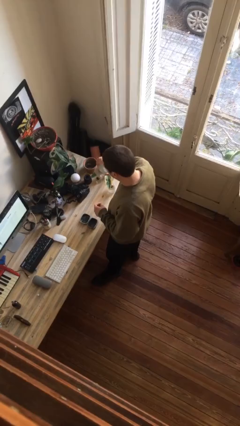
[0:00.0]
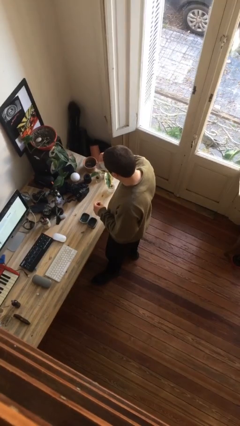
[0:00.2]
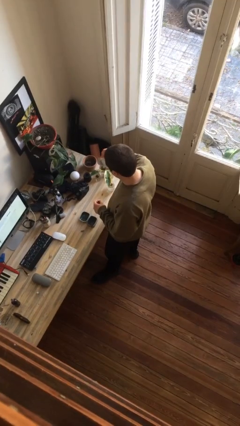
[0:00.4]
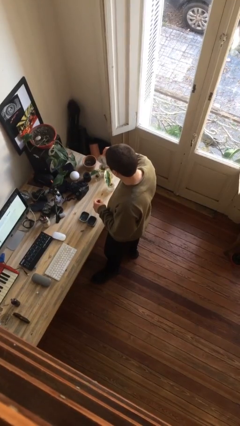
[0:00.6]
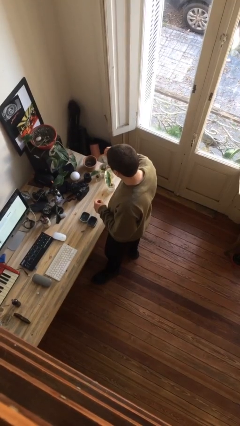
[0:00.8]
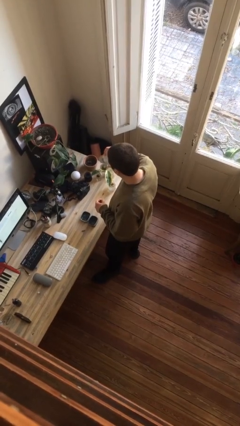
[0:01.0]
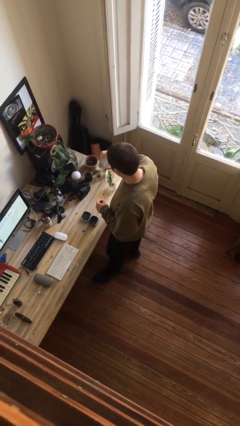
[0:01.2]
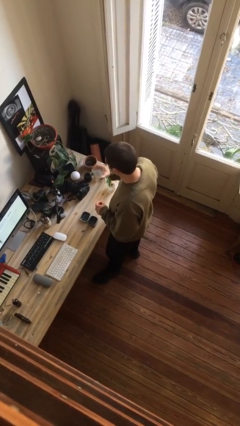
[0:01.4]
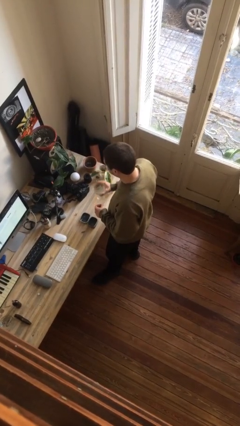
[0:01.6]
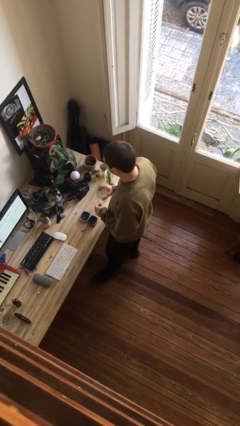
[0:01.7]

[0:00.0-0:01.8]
person drinks from cup

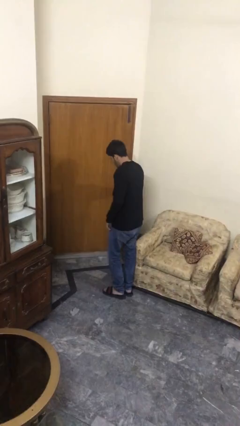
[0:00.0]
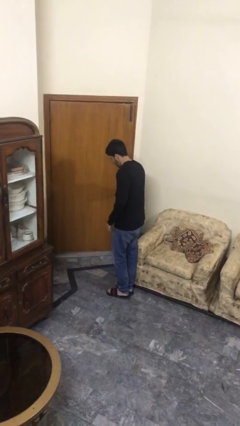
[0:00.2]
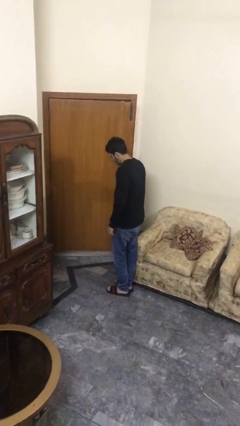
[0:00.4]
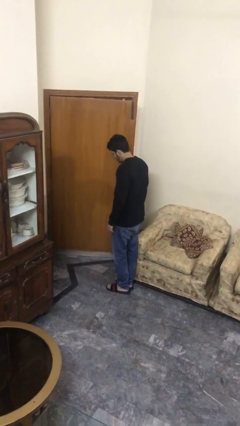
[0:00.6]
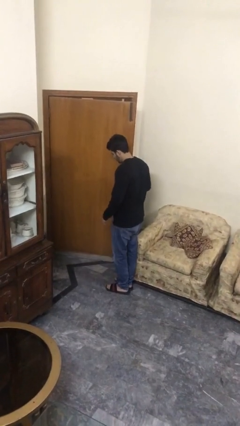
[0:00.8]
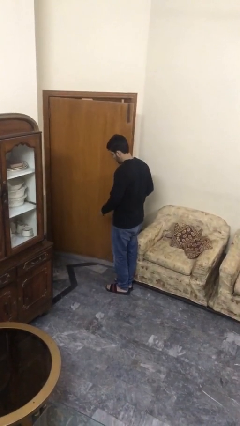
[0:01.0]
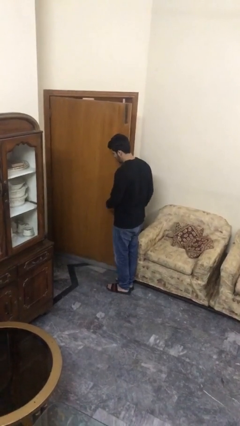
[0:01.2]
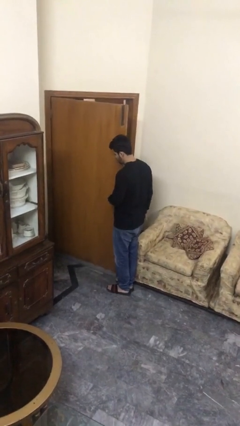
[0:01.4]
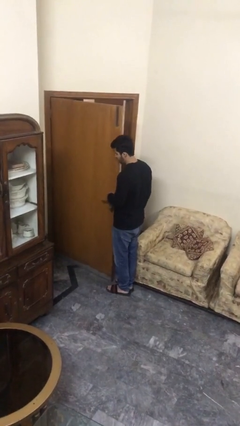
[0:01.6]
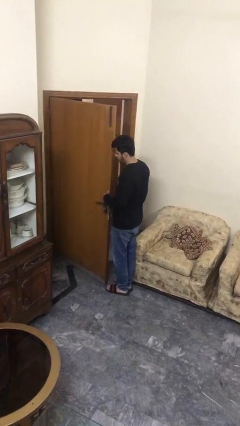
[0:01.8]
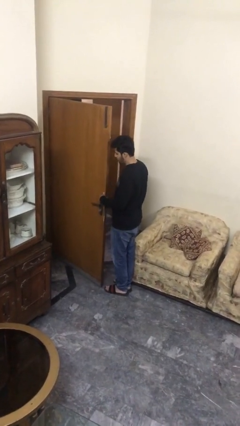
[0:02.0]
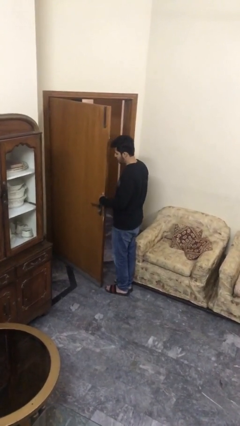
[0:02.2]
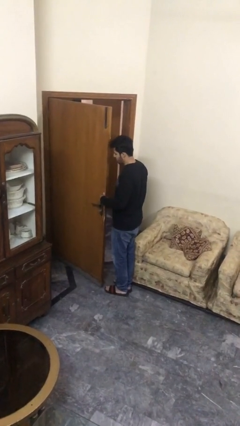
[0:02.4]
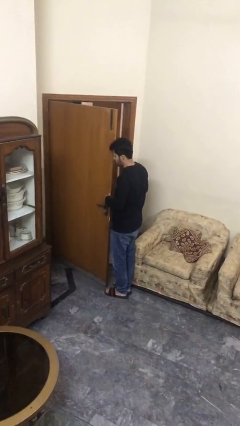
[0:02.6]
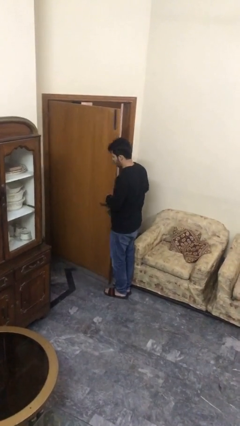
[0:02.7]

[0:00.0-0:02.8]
person opens facility door

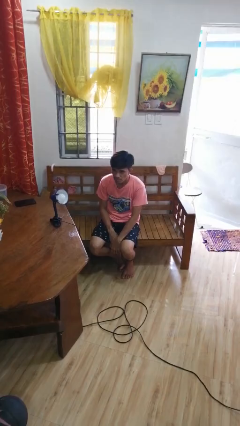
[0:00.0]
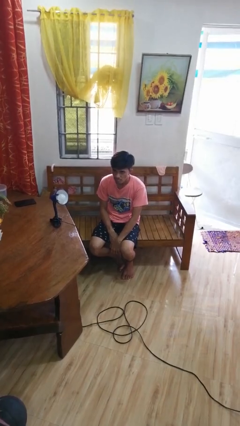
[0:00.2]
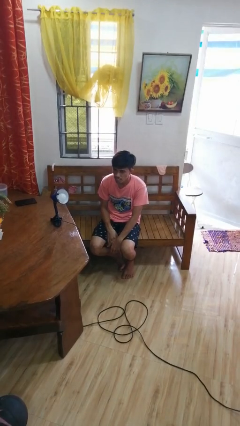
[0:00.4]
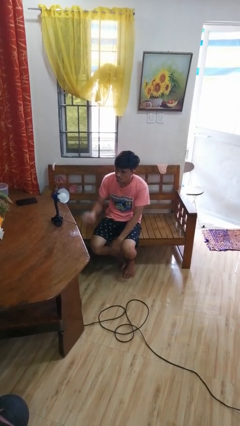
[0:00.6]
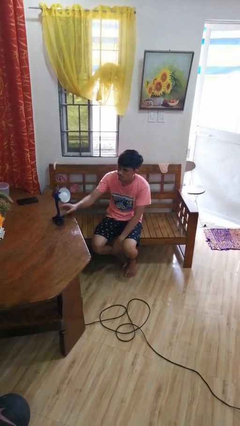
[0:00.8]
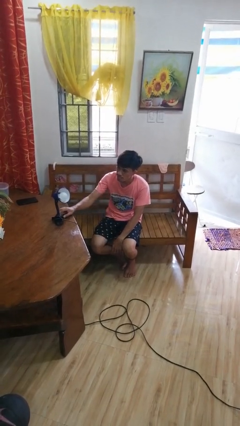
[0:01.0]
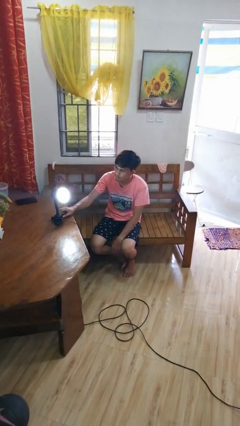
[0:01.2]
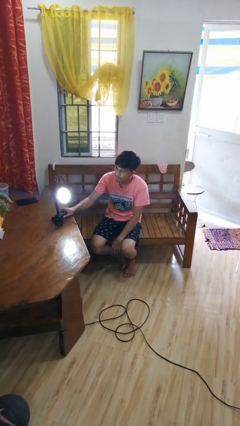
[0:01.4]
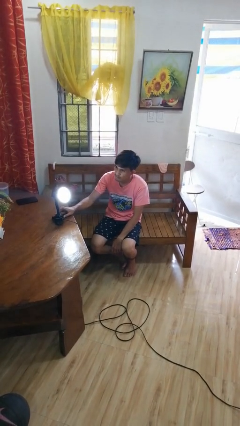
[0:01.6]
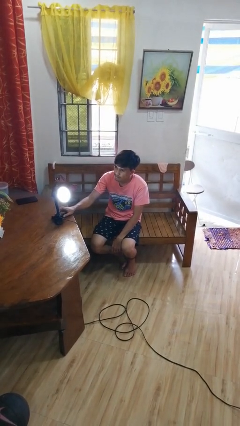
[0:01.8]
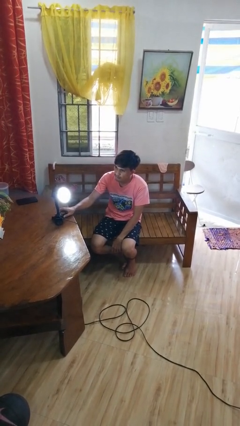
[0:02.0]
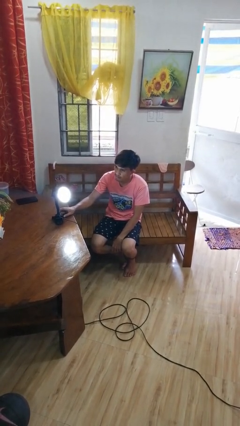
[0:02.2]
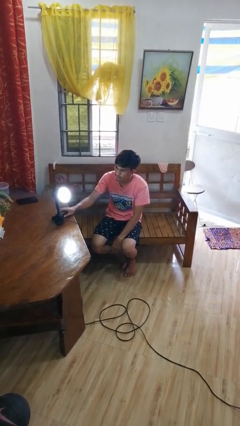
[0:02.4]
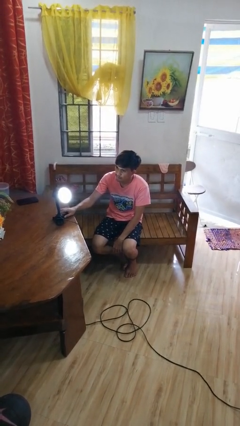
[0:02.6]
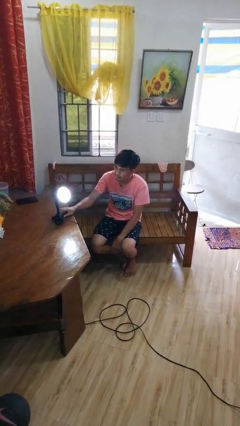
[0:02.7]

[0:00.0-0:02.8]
person turns on lamp

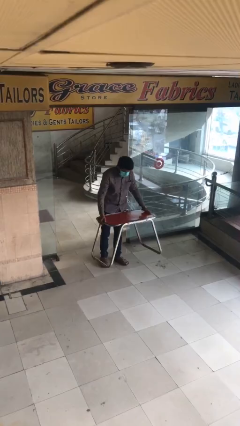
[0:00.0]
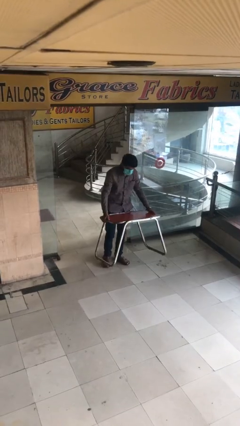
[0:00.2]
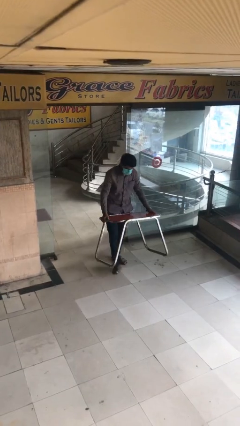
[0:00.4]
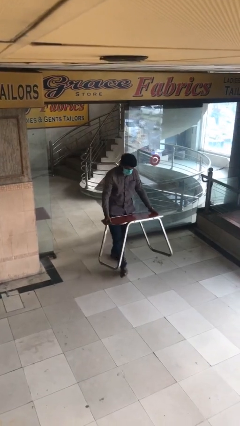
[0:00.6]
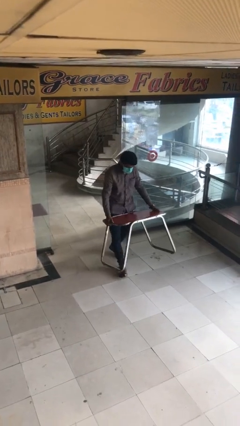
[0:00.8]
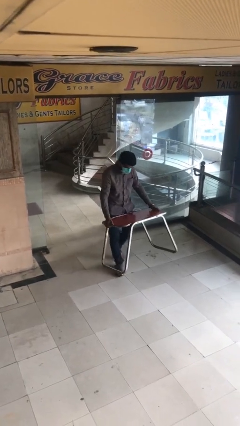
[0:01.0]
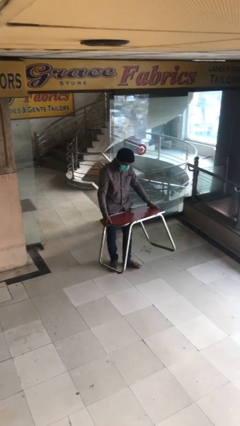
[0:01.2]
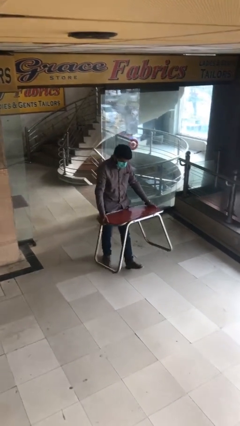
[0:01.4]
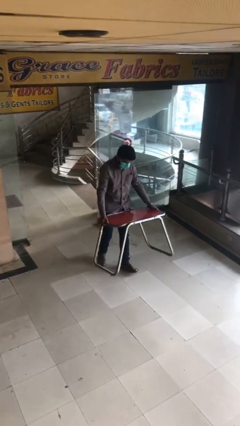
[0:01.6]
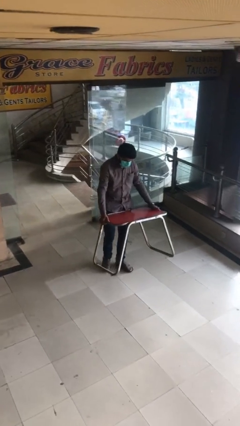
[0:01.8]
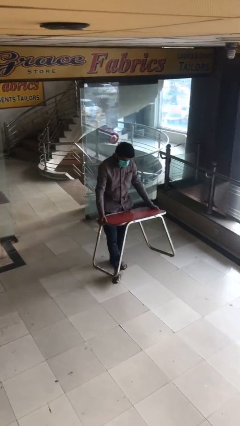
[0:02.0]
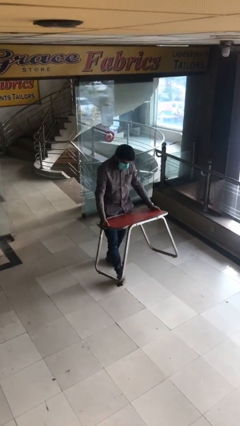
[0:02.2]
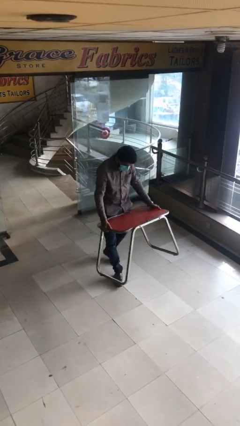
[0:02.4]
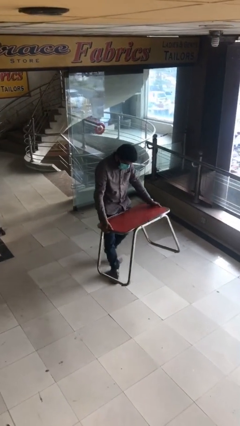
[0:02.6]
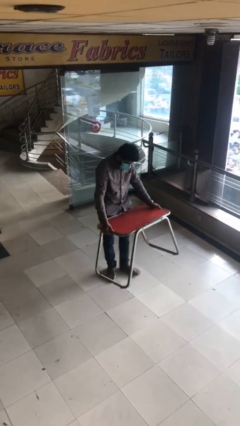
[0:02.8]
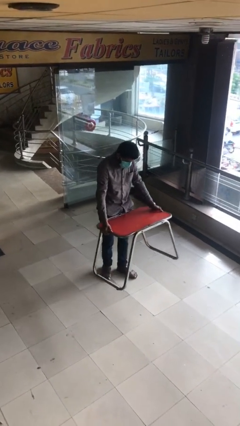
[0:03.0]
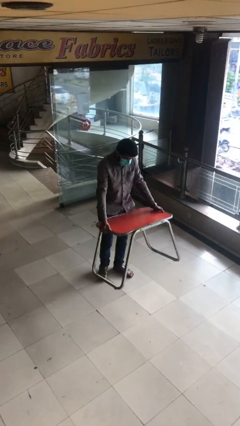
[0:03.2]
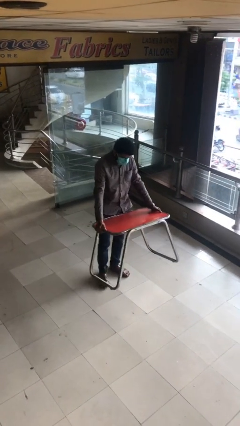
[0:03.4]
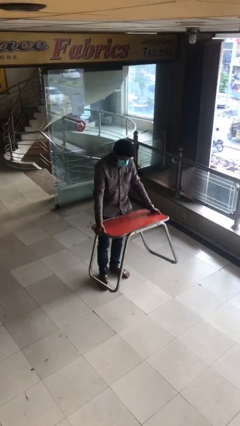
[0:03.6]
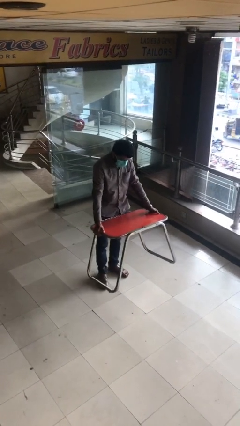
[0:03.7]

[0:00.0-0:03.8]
person carries heavy object

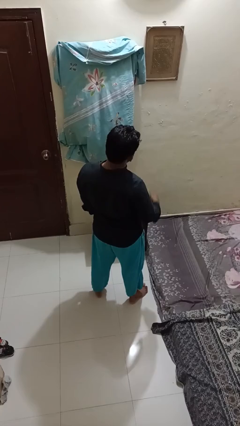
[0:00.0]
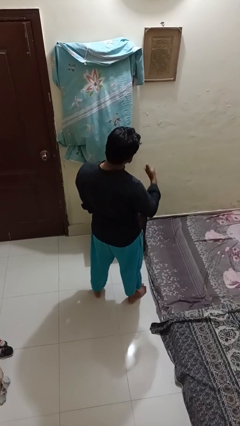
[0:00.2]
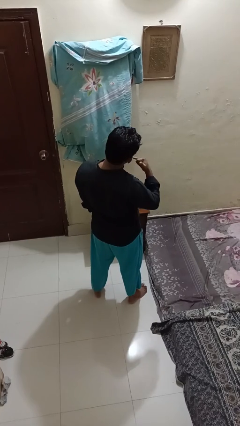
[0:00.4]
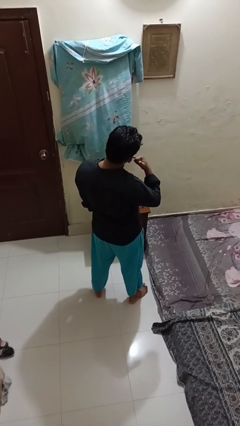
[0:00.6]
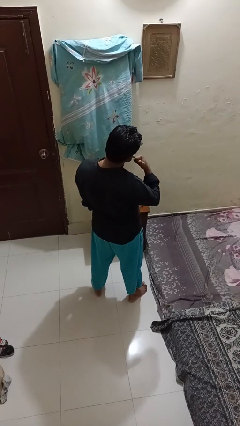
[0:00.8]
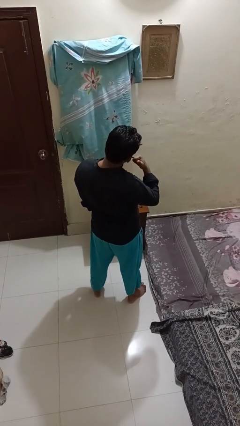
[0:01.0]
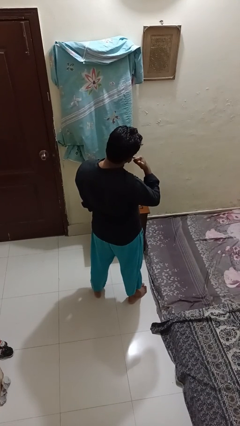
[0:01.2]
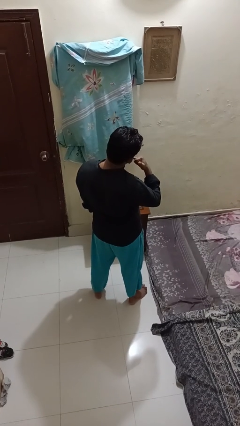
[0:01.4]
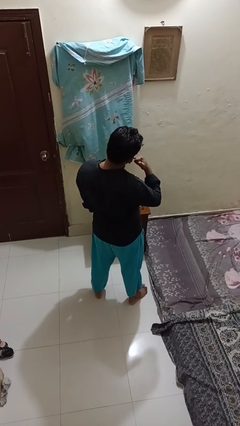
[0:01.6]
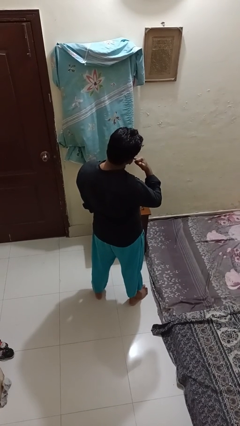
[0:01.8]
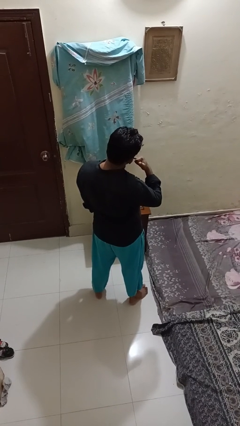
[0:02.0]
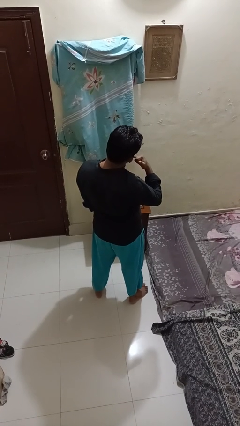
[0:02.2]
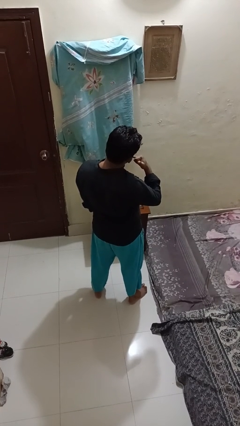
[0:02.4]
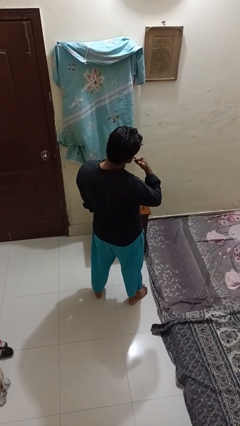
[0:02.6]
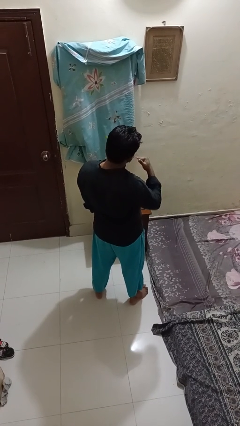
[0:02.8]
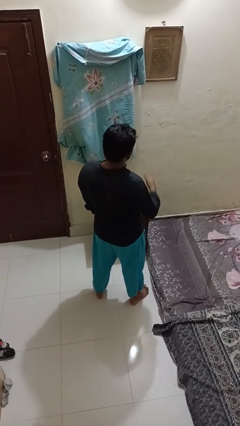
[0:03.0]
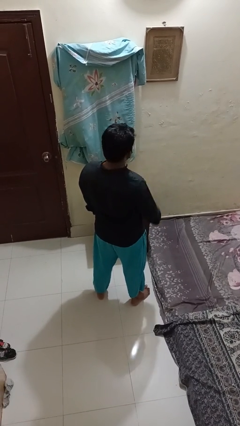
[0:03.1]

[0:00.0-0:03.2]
person gestures call me

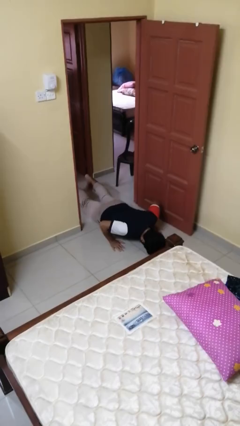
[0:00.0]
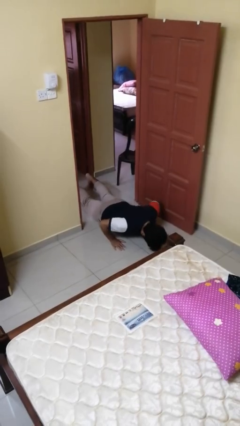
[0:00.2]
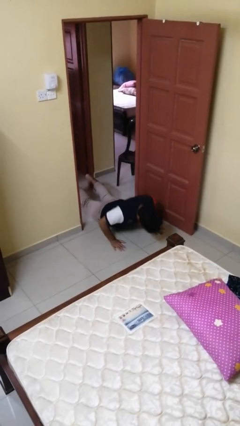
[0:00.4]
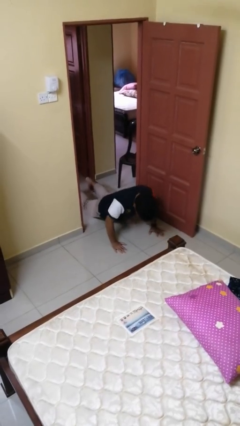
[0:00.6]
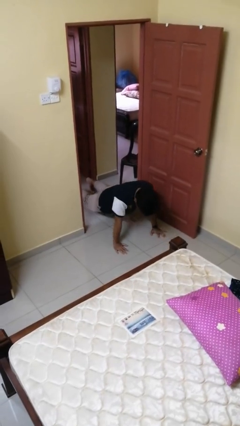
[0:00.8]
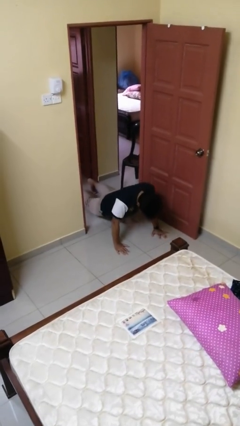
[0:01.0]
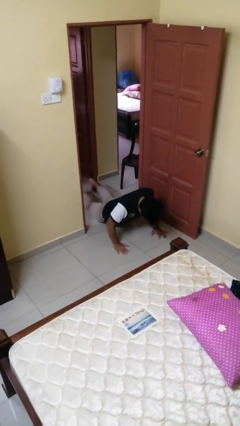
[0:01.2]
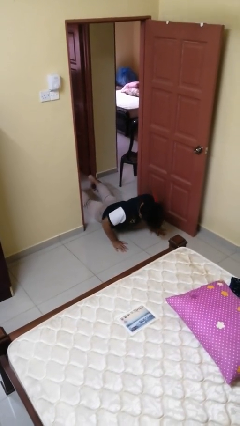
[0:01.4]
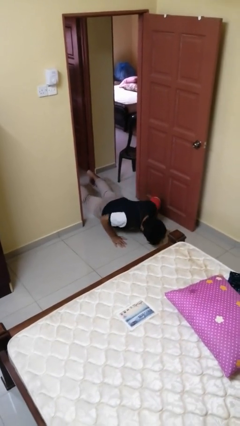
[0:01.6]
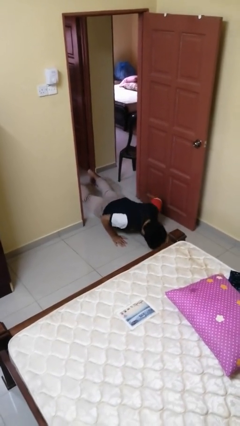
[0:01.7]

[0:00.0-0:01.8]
person exercises with pushup

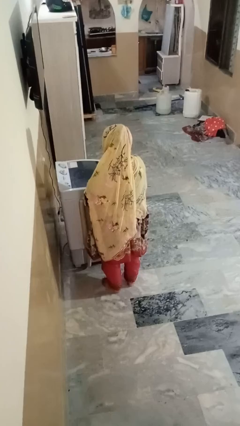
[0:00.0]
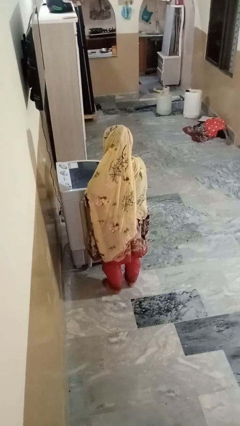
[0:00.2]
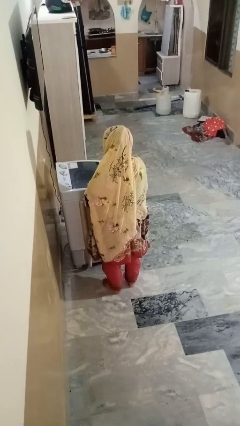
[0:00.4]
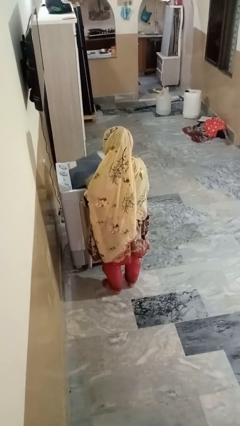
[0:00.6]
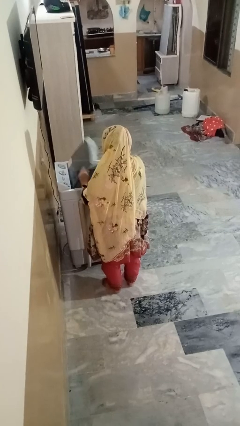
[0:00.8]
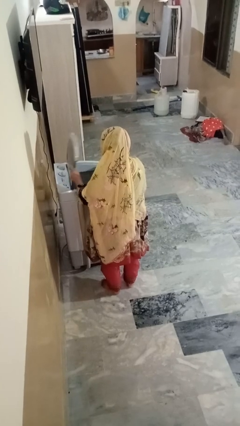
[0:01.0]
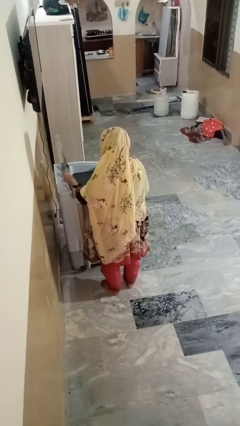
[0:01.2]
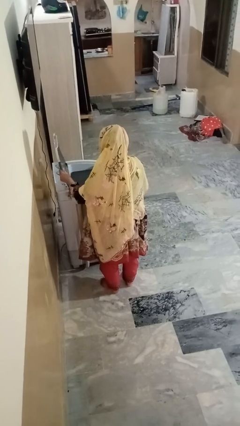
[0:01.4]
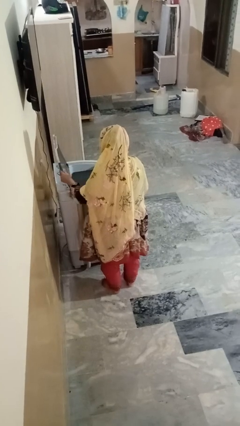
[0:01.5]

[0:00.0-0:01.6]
person opens clothes washer
